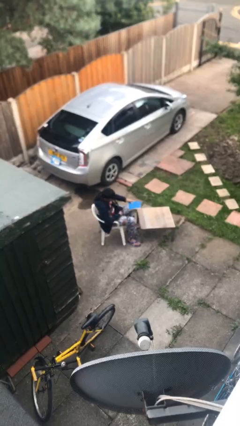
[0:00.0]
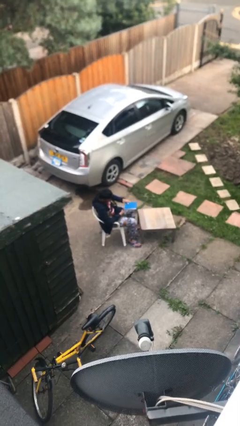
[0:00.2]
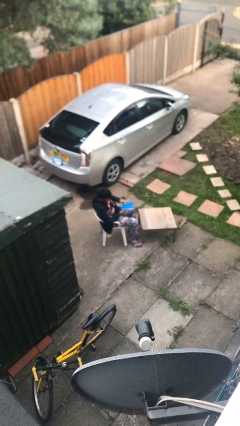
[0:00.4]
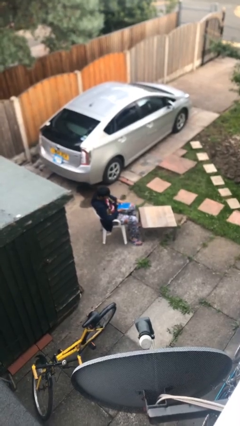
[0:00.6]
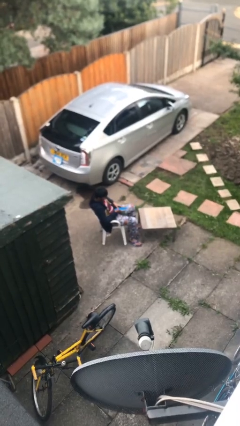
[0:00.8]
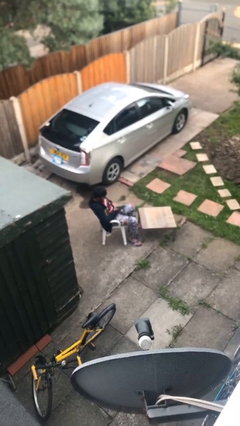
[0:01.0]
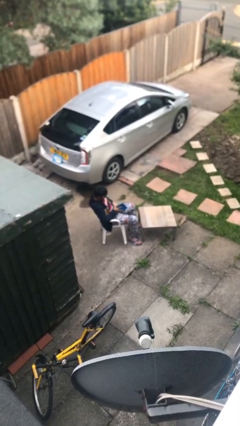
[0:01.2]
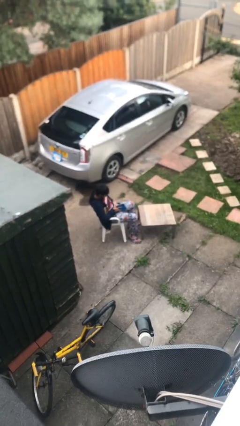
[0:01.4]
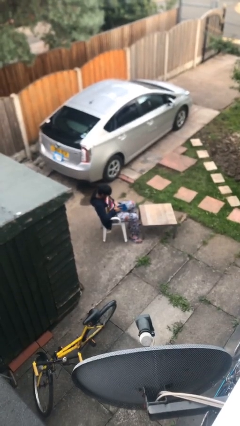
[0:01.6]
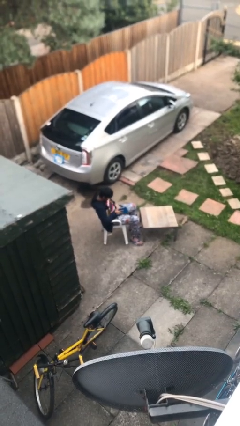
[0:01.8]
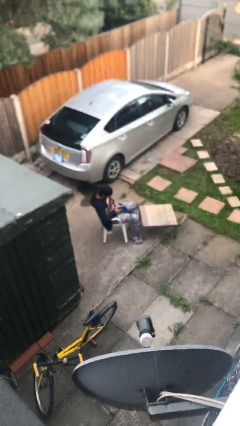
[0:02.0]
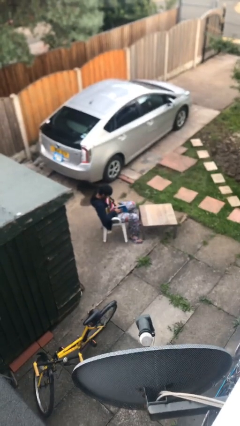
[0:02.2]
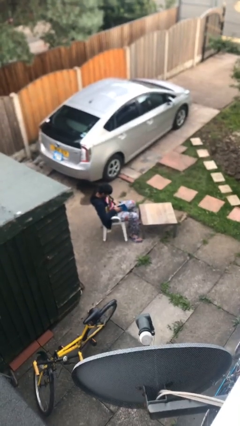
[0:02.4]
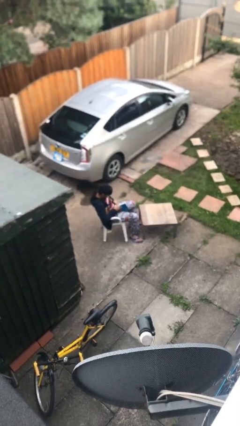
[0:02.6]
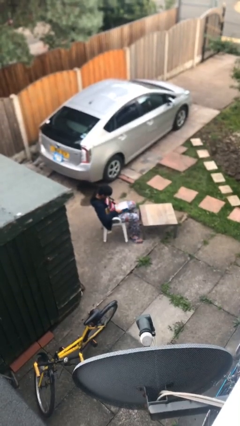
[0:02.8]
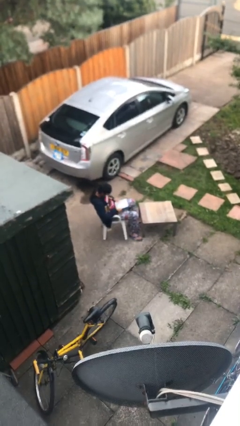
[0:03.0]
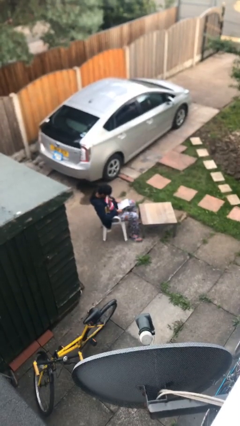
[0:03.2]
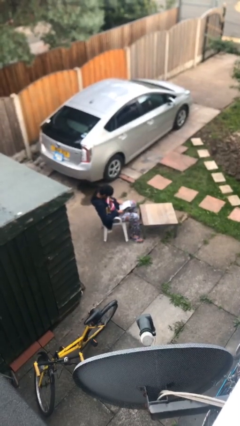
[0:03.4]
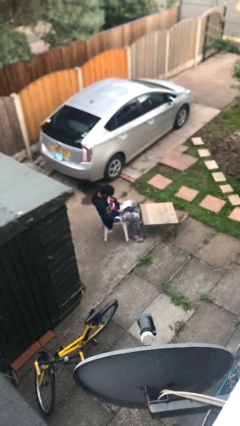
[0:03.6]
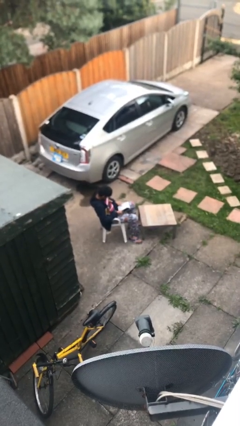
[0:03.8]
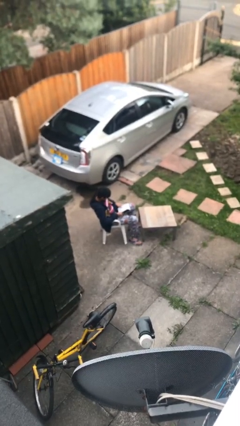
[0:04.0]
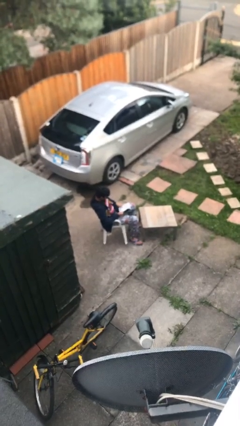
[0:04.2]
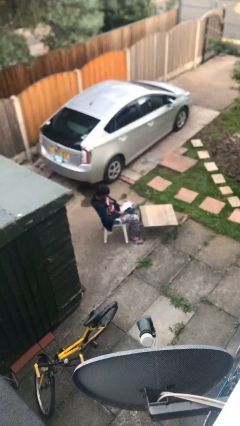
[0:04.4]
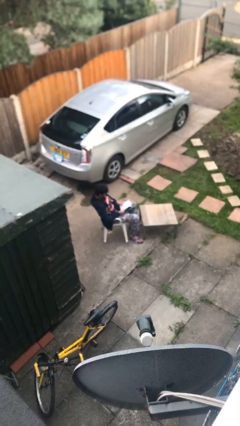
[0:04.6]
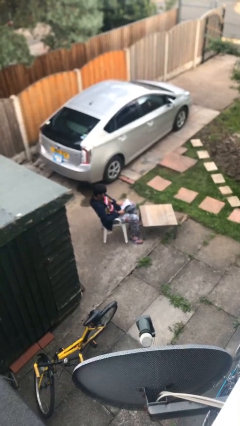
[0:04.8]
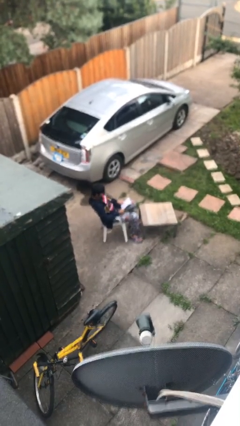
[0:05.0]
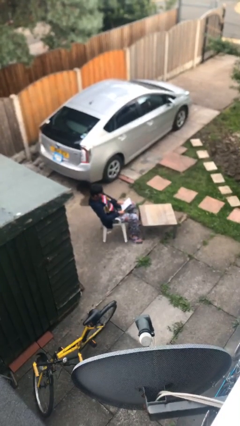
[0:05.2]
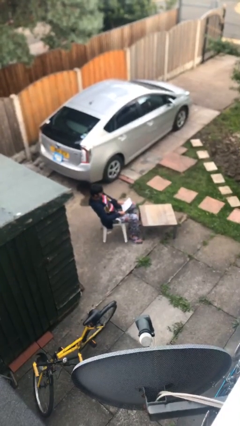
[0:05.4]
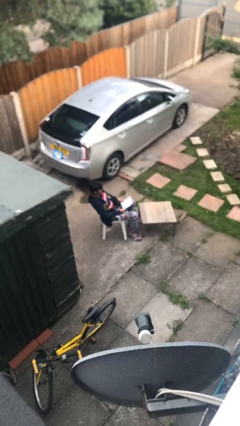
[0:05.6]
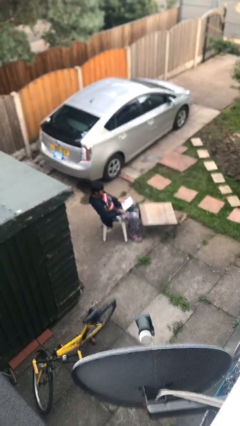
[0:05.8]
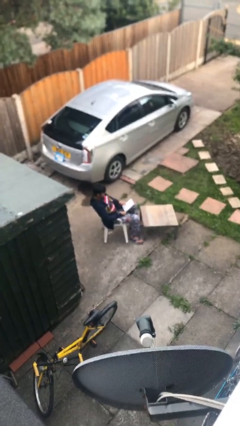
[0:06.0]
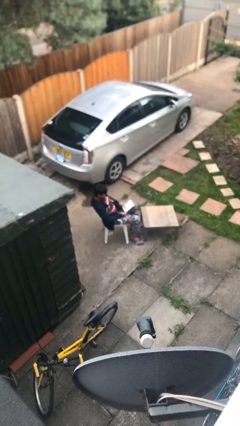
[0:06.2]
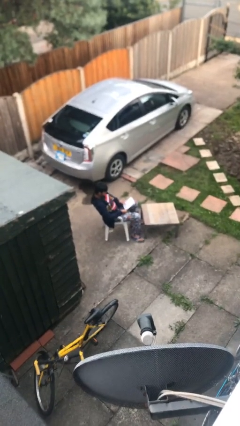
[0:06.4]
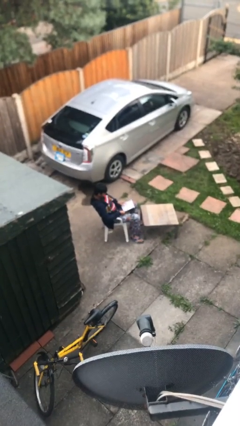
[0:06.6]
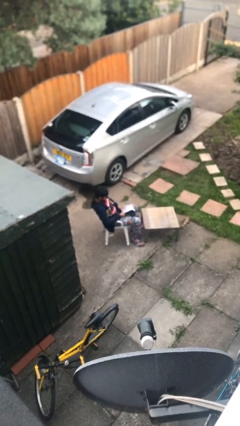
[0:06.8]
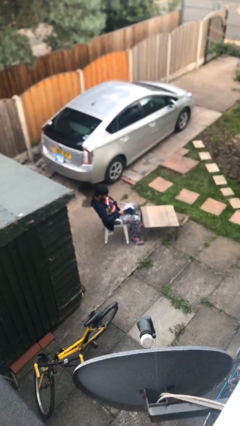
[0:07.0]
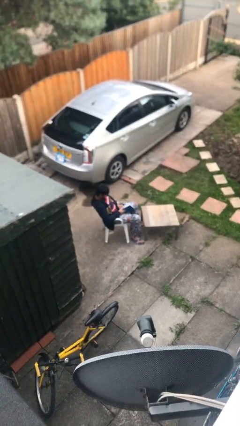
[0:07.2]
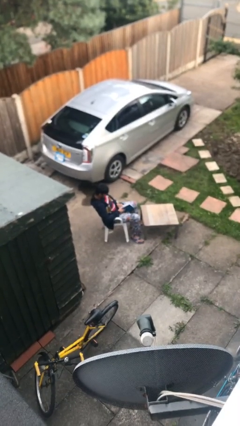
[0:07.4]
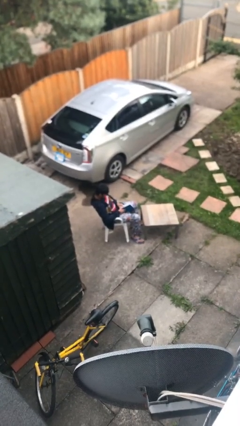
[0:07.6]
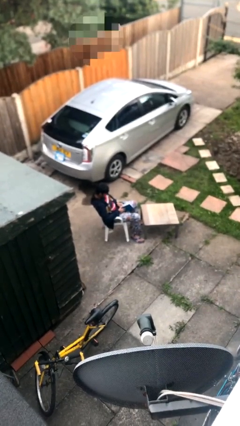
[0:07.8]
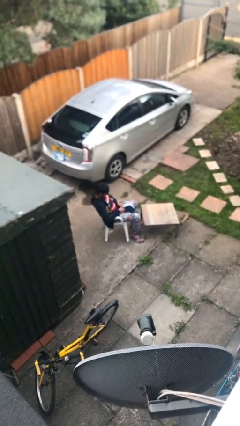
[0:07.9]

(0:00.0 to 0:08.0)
person reads document

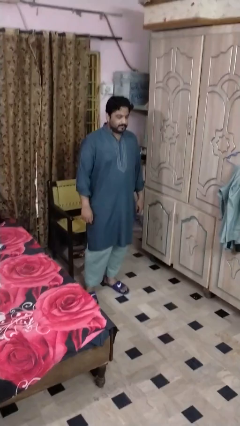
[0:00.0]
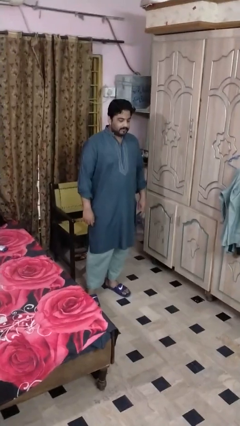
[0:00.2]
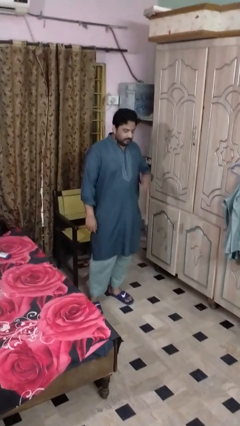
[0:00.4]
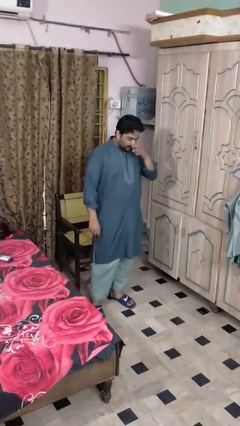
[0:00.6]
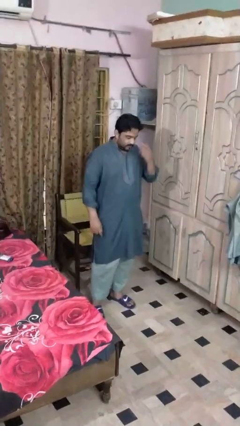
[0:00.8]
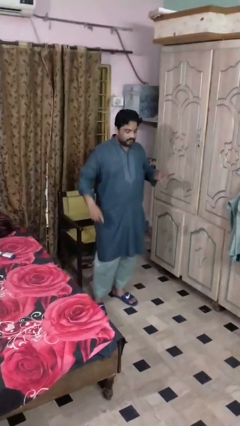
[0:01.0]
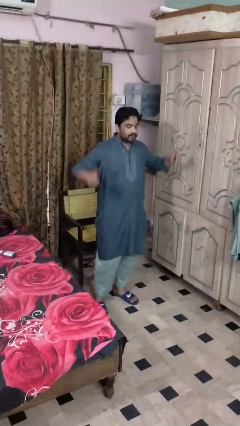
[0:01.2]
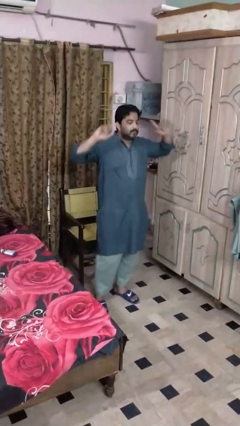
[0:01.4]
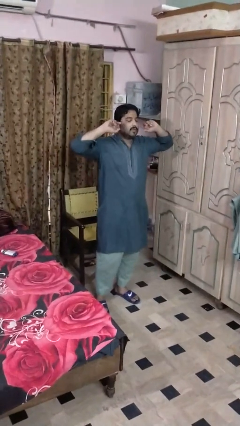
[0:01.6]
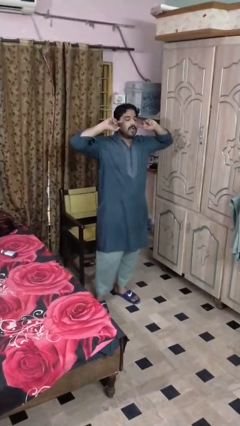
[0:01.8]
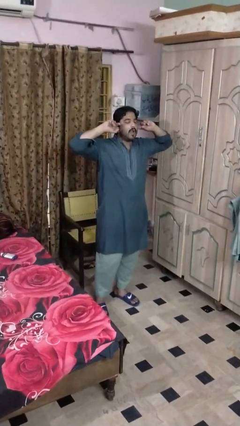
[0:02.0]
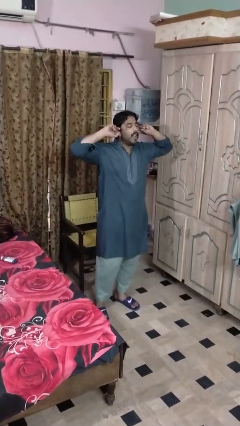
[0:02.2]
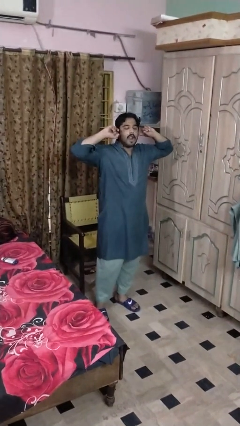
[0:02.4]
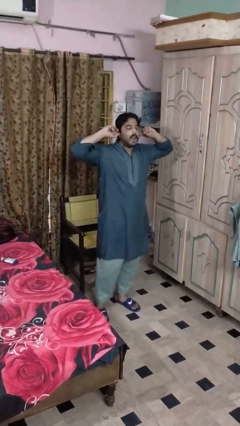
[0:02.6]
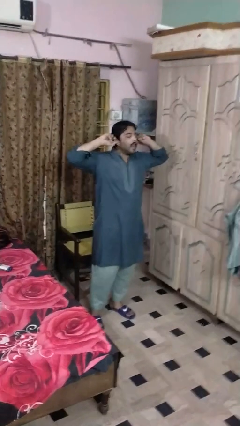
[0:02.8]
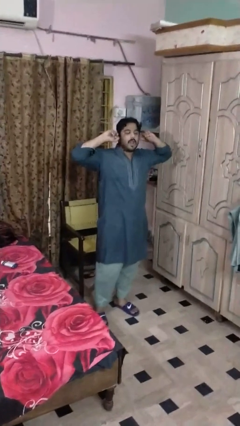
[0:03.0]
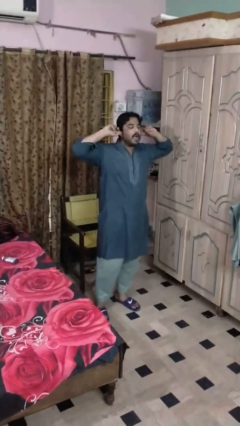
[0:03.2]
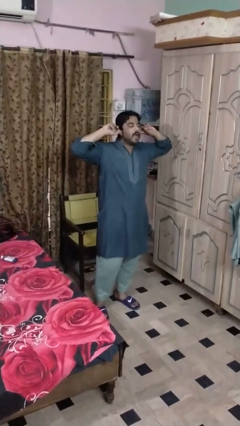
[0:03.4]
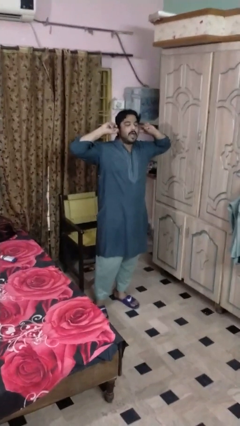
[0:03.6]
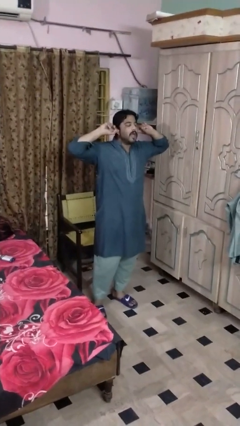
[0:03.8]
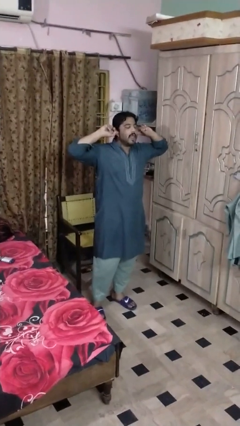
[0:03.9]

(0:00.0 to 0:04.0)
person puts fingers in ear

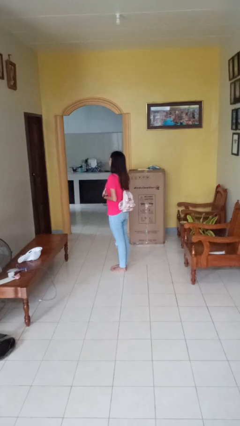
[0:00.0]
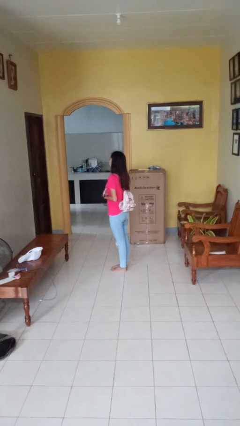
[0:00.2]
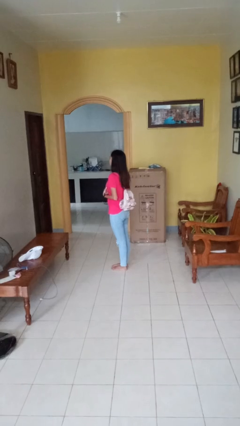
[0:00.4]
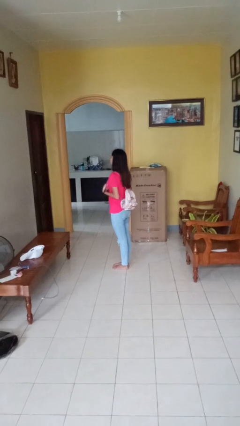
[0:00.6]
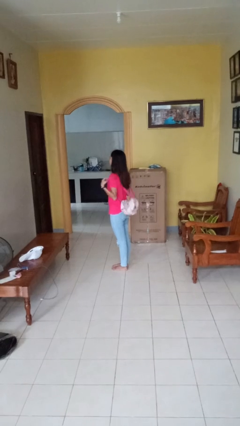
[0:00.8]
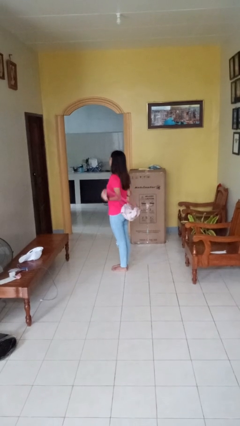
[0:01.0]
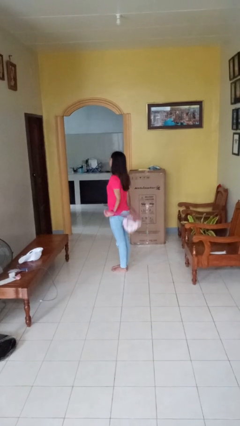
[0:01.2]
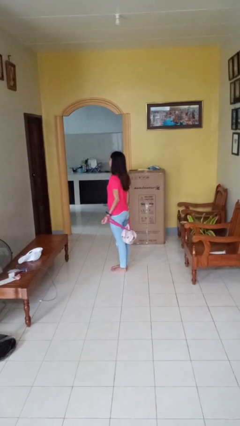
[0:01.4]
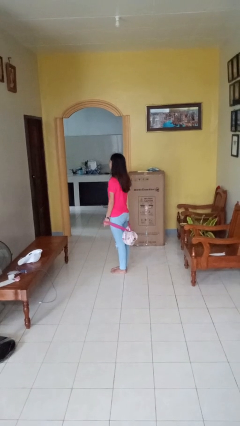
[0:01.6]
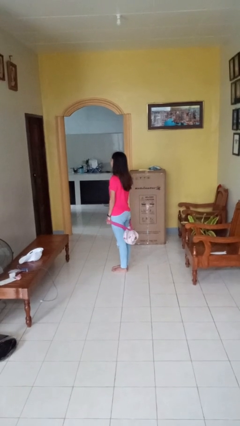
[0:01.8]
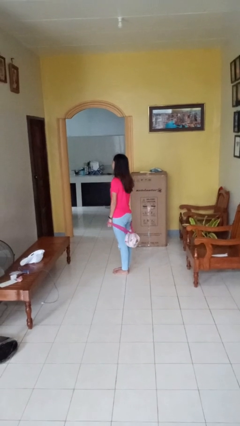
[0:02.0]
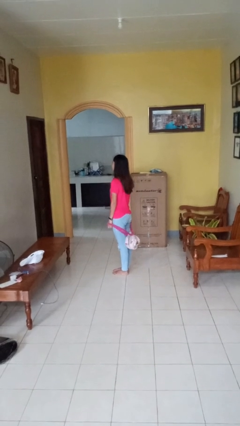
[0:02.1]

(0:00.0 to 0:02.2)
person takes off backpack

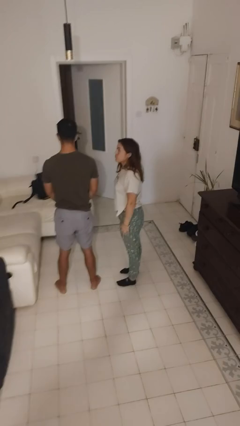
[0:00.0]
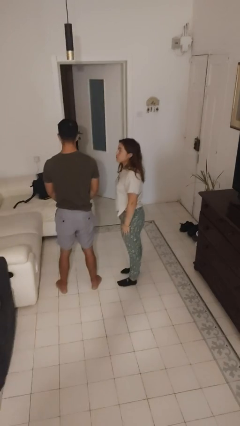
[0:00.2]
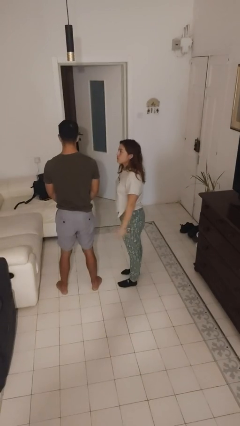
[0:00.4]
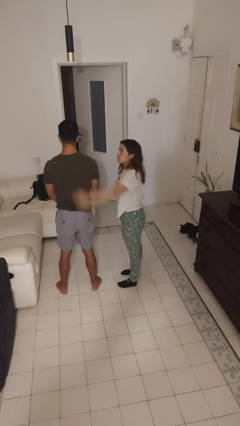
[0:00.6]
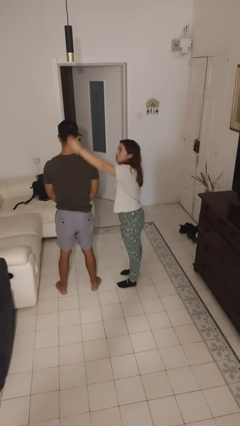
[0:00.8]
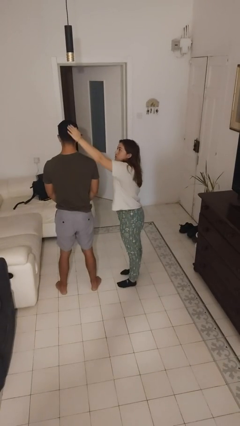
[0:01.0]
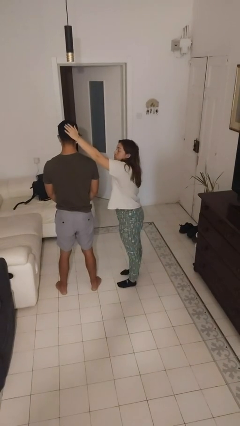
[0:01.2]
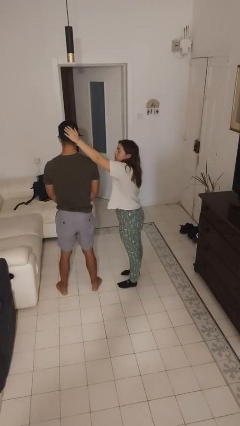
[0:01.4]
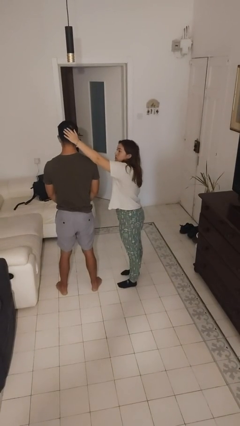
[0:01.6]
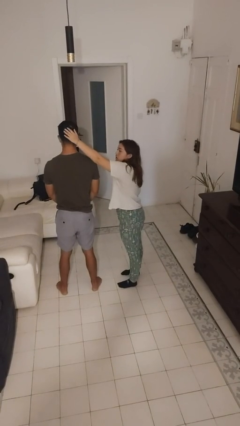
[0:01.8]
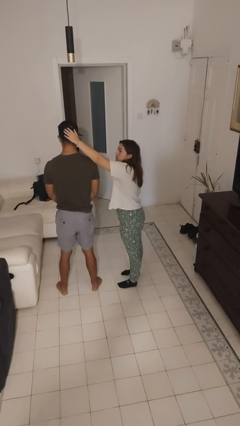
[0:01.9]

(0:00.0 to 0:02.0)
person grabs person by hair

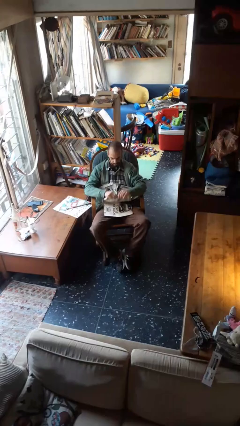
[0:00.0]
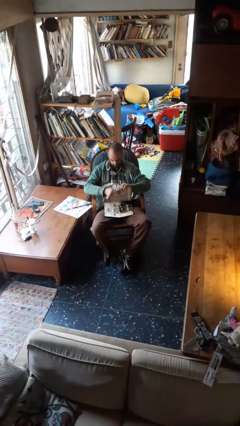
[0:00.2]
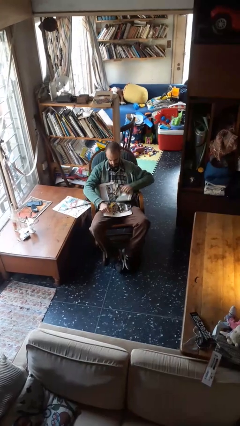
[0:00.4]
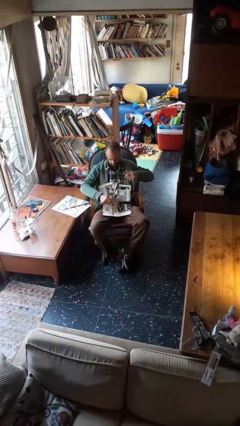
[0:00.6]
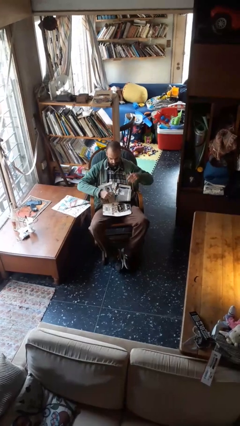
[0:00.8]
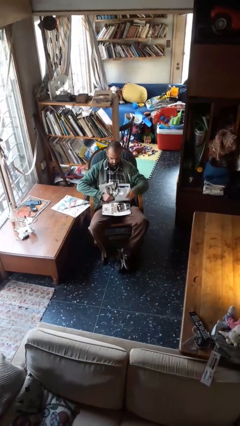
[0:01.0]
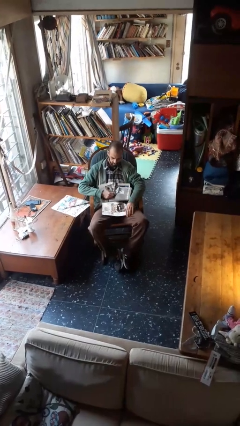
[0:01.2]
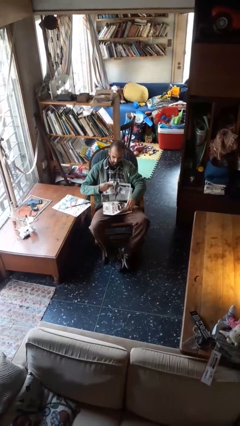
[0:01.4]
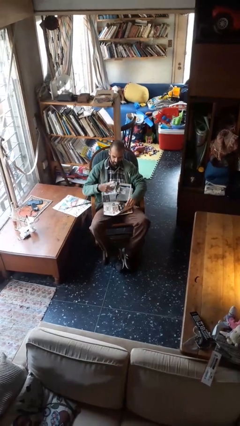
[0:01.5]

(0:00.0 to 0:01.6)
person tears paper
